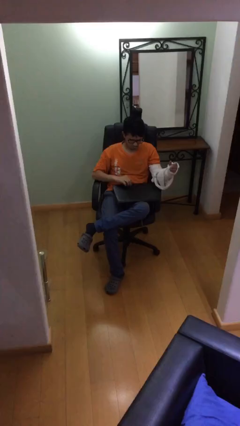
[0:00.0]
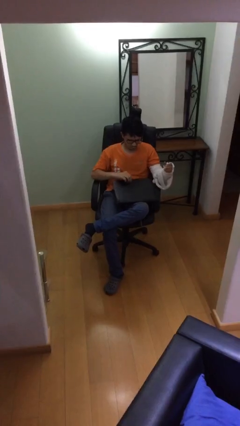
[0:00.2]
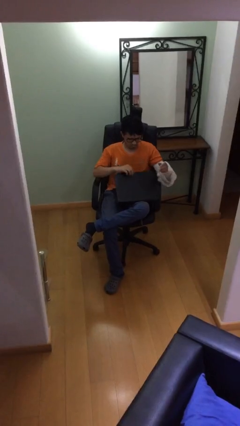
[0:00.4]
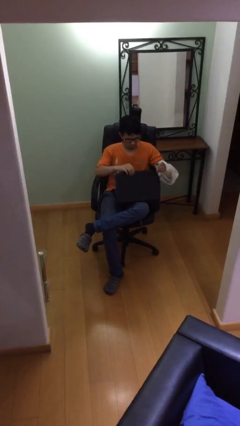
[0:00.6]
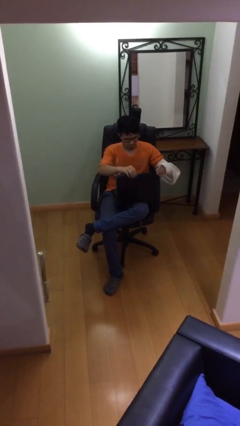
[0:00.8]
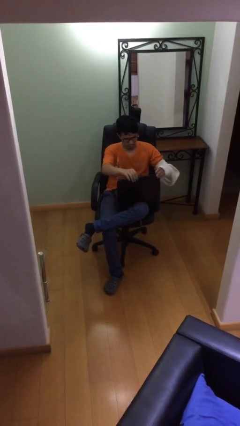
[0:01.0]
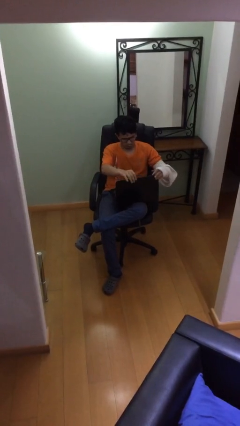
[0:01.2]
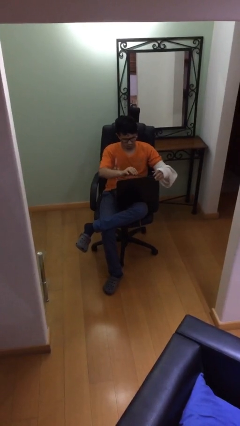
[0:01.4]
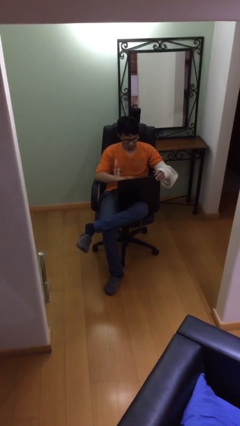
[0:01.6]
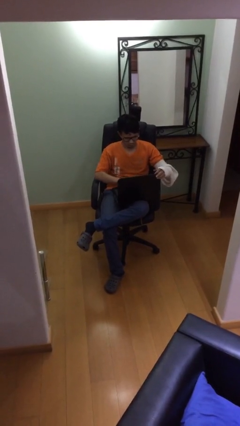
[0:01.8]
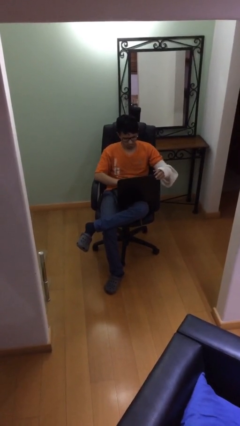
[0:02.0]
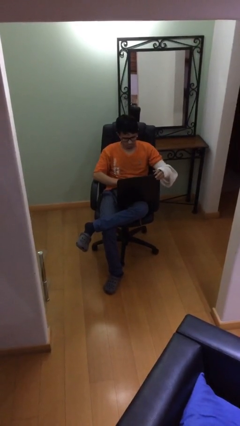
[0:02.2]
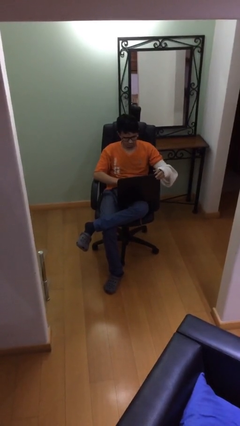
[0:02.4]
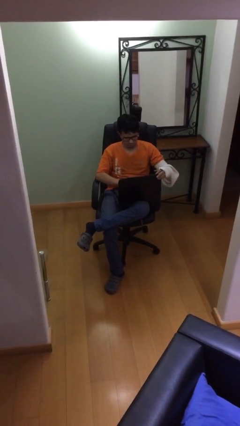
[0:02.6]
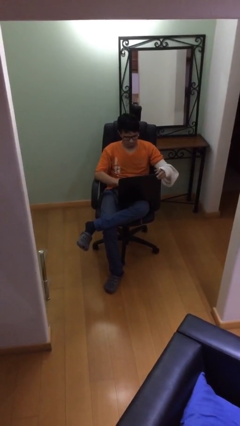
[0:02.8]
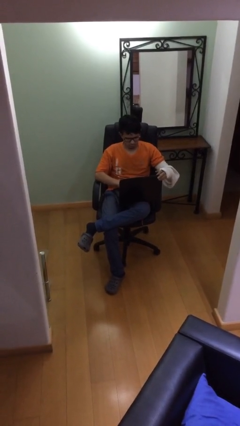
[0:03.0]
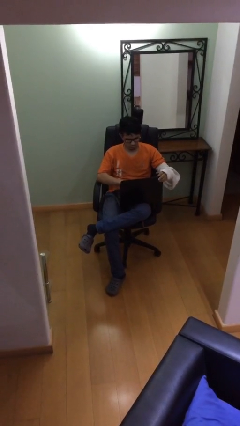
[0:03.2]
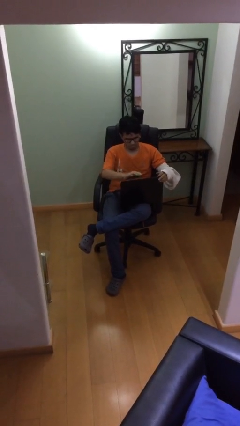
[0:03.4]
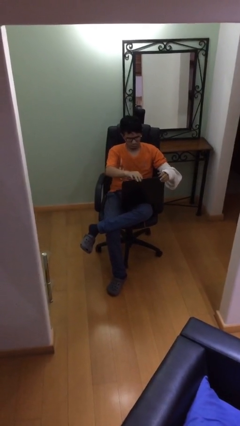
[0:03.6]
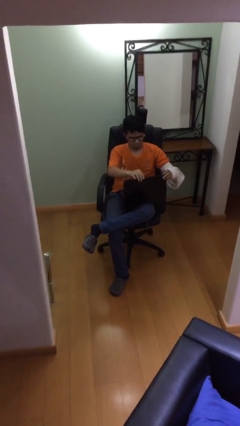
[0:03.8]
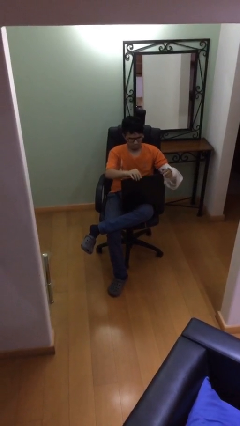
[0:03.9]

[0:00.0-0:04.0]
person interacts with laptop

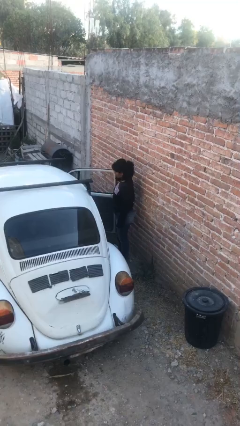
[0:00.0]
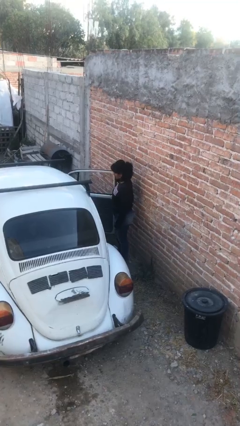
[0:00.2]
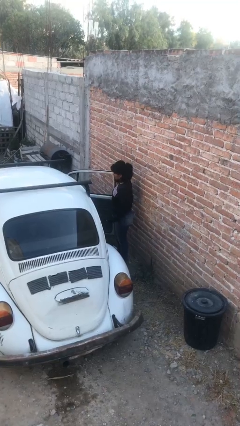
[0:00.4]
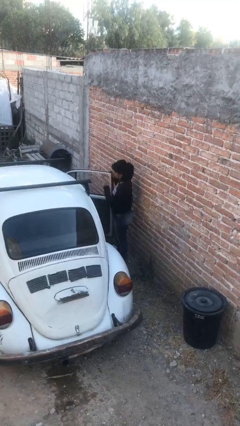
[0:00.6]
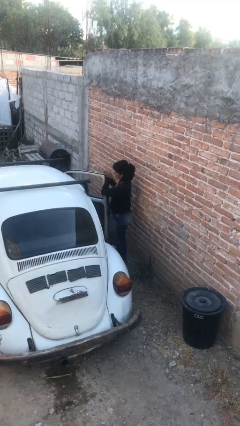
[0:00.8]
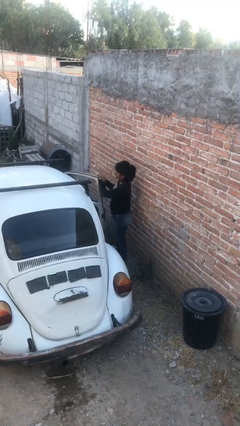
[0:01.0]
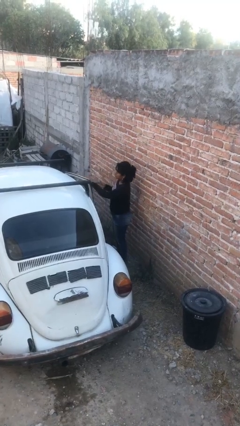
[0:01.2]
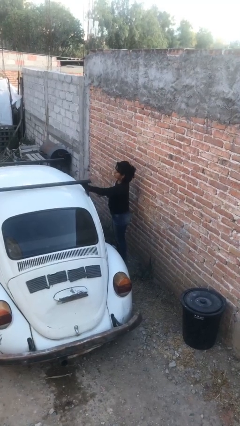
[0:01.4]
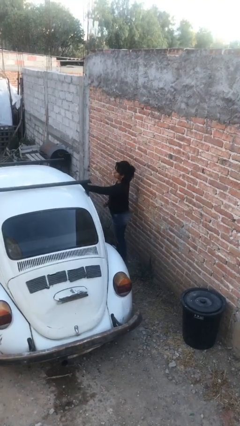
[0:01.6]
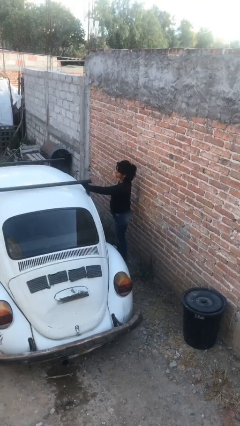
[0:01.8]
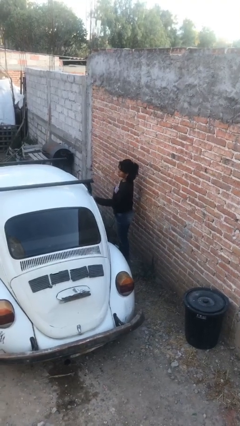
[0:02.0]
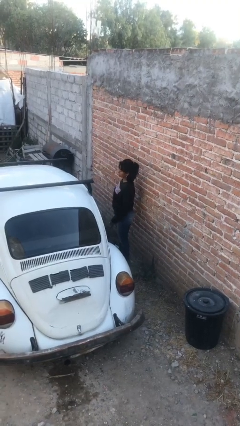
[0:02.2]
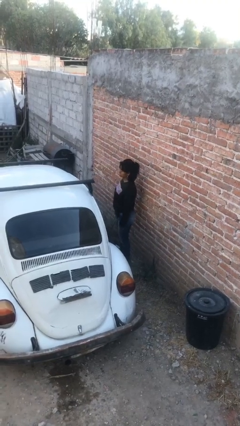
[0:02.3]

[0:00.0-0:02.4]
person closes car door

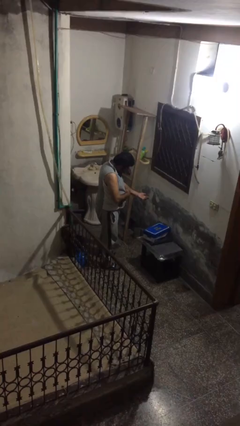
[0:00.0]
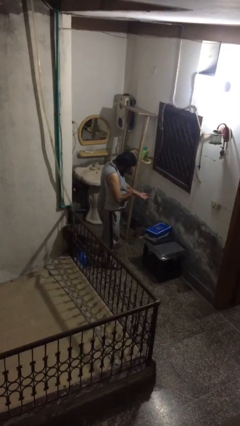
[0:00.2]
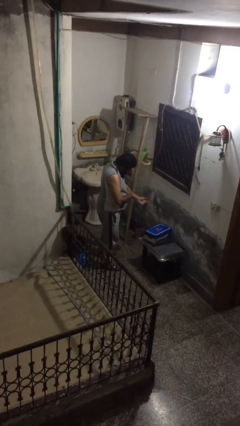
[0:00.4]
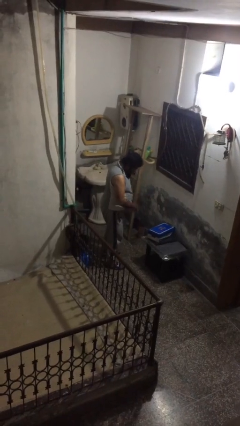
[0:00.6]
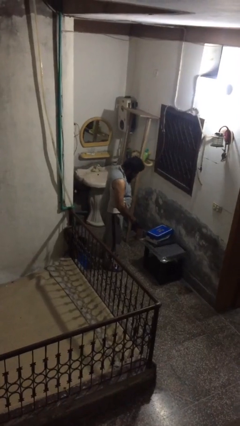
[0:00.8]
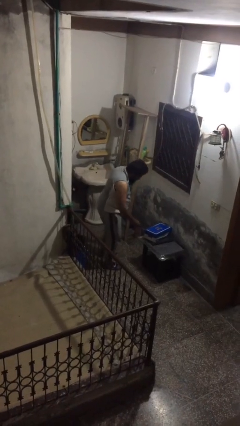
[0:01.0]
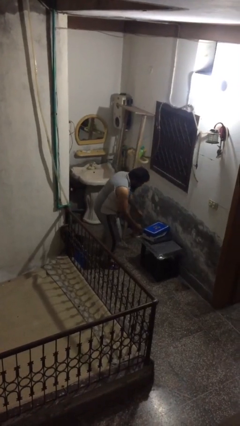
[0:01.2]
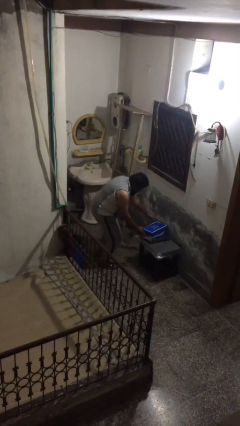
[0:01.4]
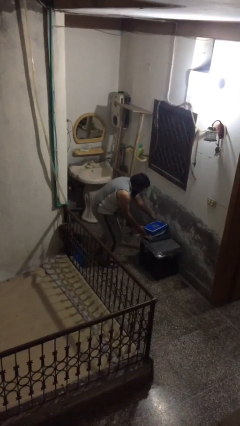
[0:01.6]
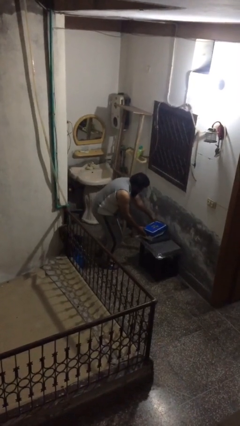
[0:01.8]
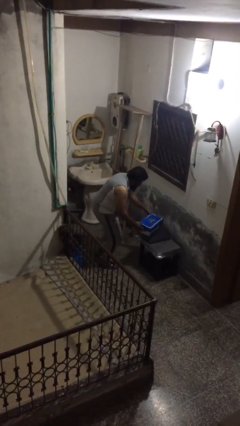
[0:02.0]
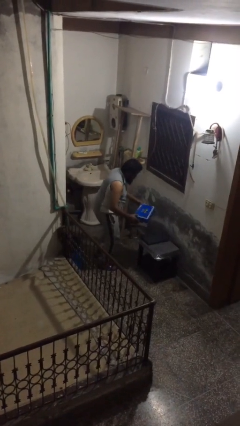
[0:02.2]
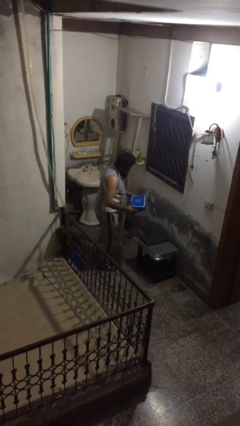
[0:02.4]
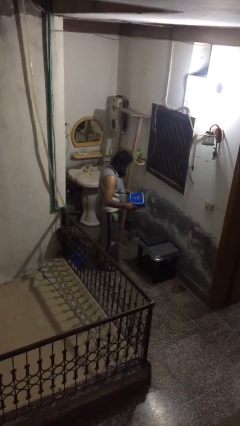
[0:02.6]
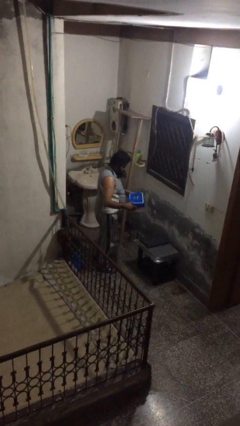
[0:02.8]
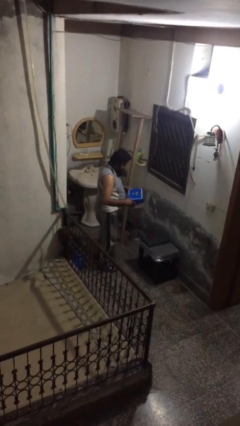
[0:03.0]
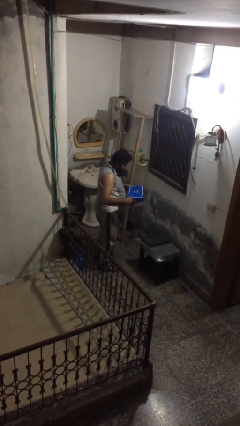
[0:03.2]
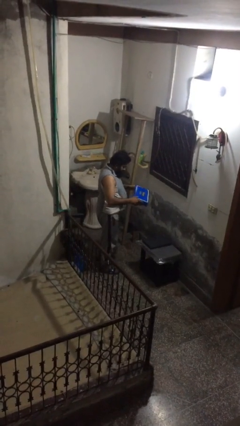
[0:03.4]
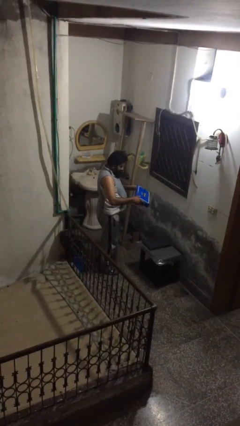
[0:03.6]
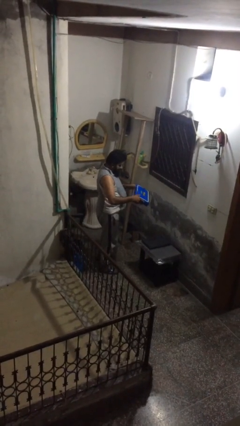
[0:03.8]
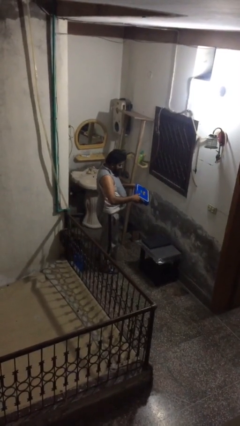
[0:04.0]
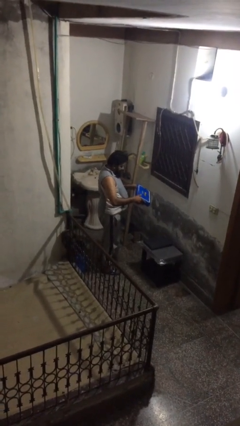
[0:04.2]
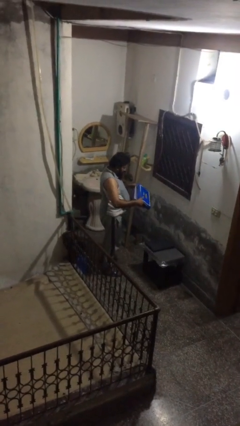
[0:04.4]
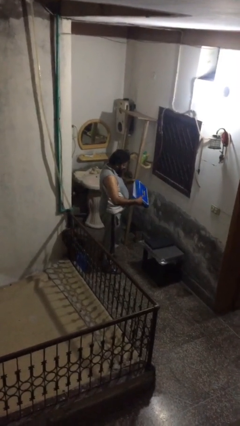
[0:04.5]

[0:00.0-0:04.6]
person picks up object from table

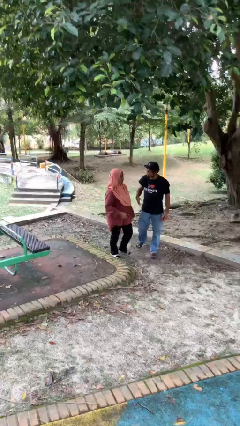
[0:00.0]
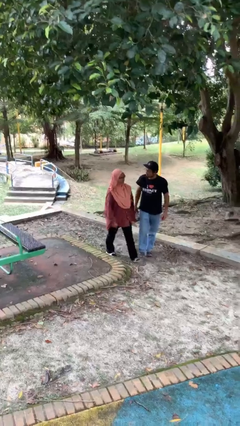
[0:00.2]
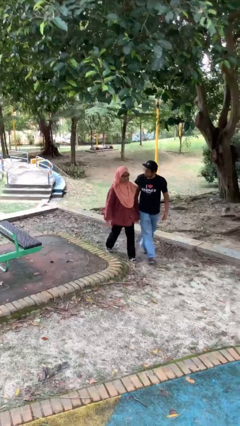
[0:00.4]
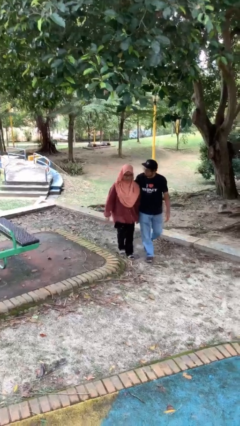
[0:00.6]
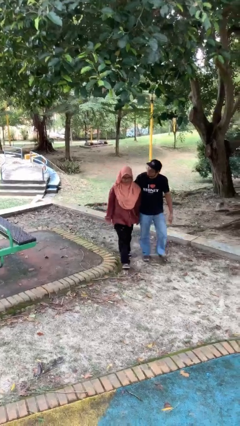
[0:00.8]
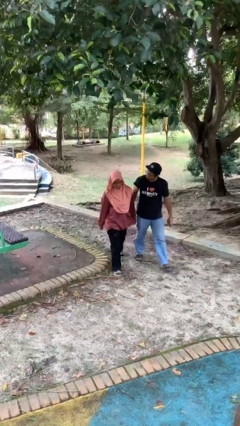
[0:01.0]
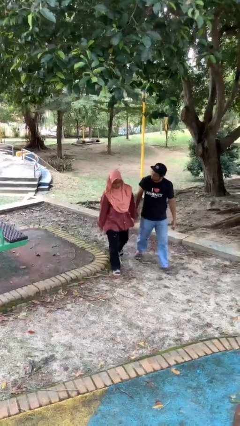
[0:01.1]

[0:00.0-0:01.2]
person talks to person

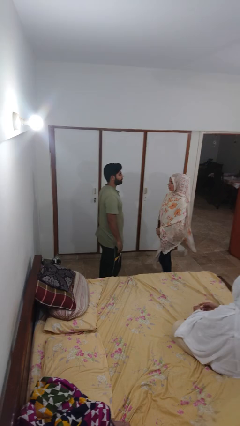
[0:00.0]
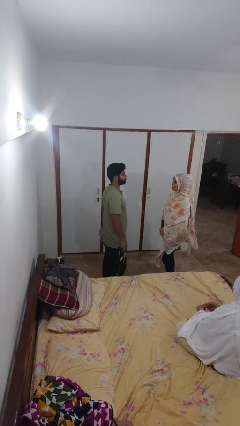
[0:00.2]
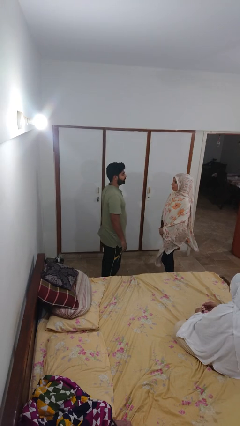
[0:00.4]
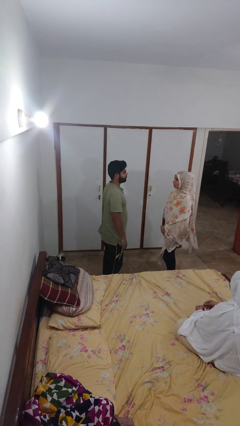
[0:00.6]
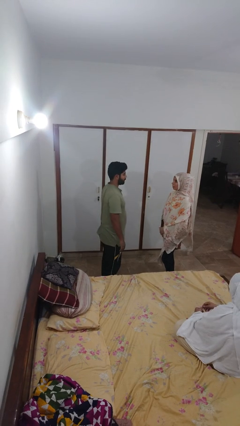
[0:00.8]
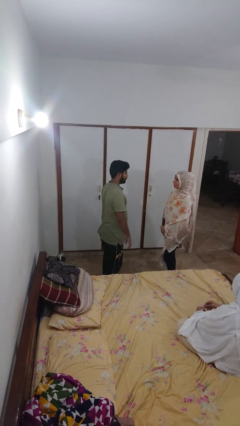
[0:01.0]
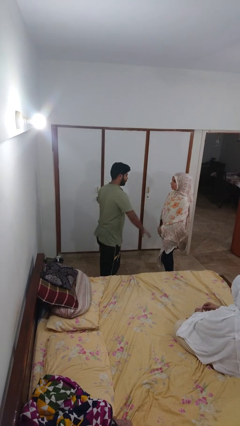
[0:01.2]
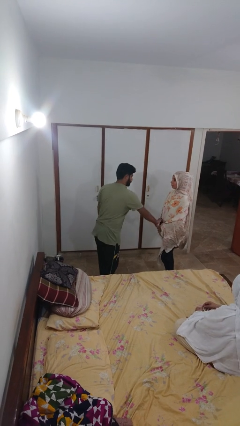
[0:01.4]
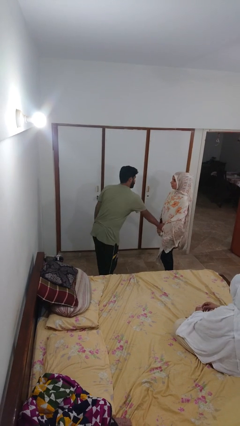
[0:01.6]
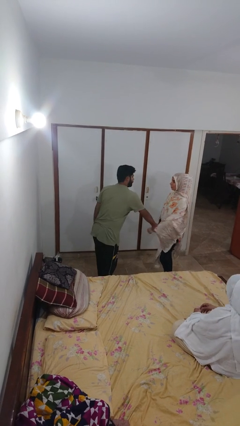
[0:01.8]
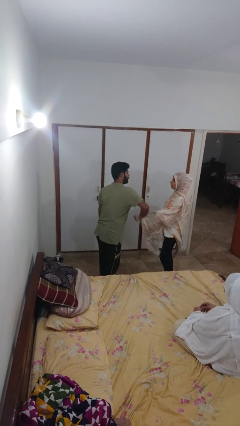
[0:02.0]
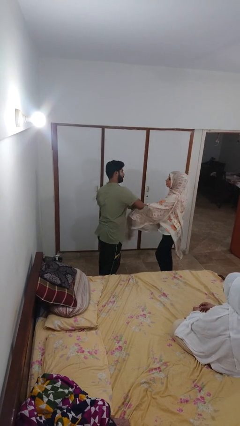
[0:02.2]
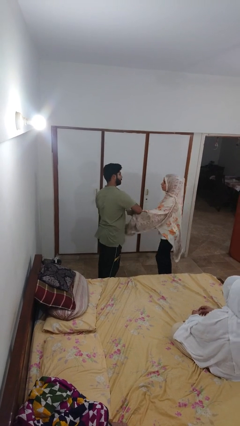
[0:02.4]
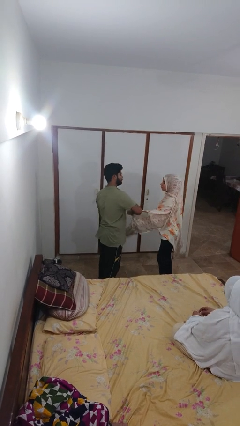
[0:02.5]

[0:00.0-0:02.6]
person grabs person by forearm

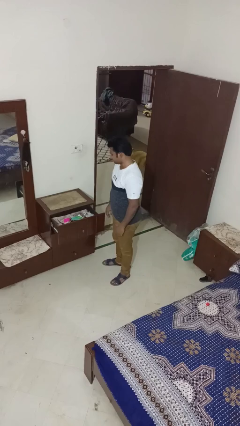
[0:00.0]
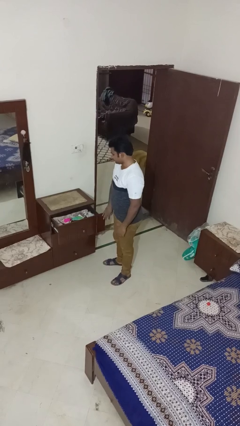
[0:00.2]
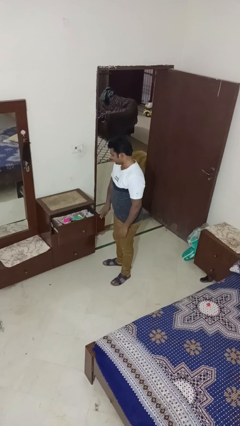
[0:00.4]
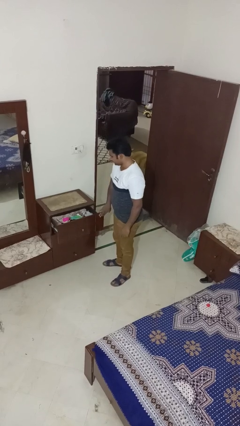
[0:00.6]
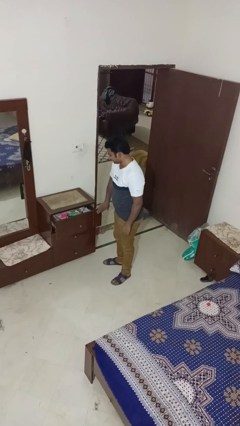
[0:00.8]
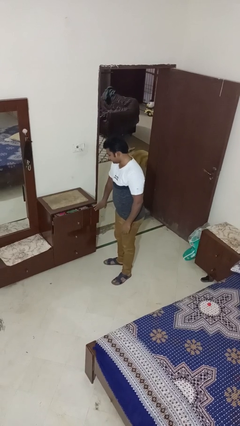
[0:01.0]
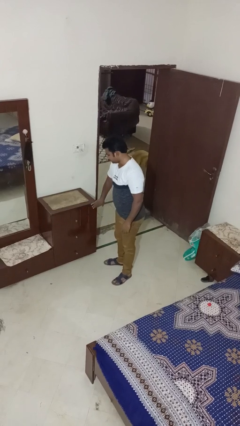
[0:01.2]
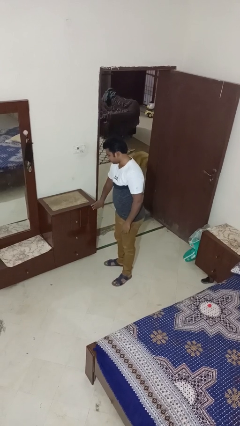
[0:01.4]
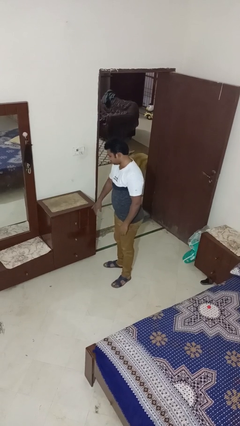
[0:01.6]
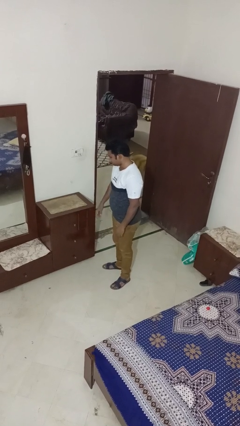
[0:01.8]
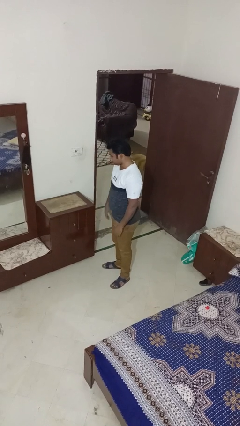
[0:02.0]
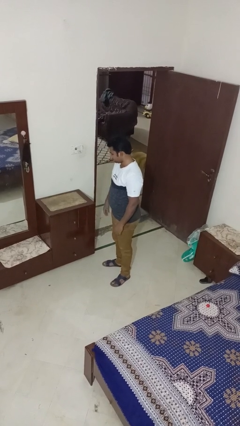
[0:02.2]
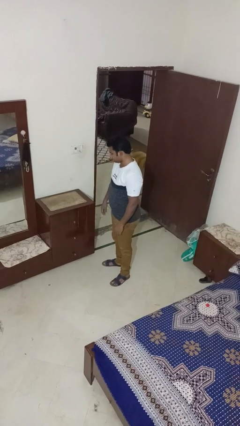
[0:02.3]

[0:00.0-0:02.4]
person closes dresser drawer

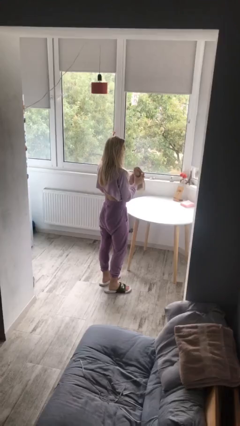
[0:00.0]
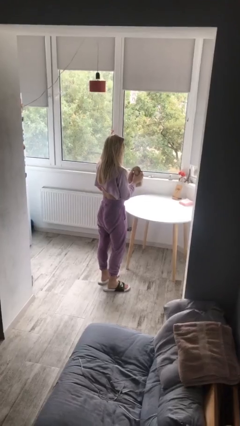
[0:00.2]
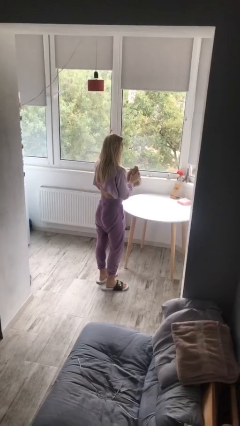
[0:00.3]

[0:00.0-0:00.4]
person crumples paper
